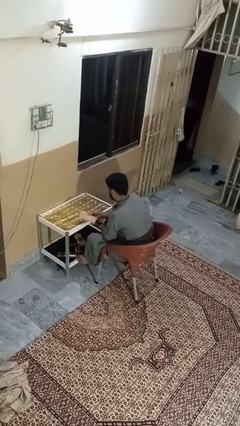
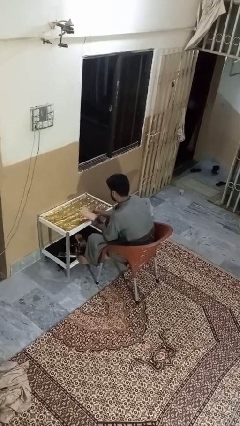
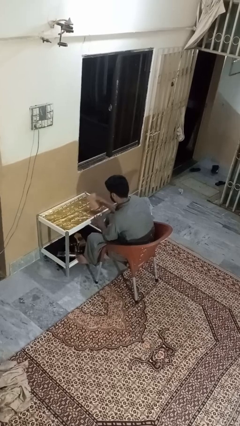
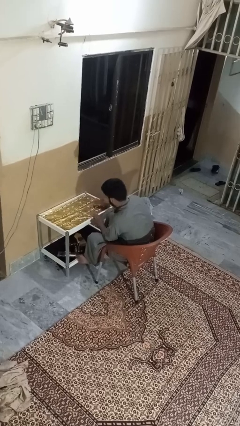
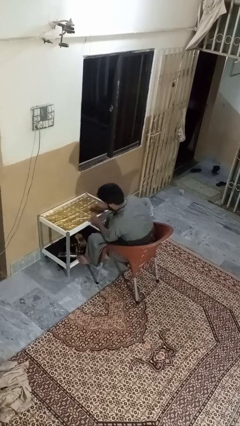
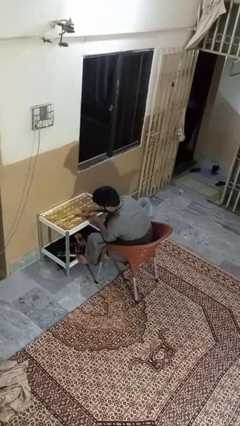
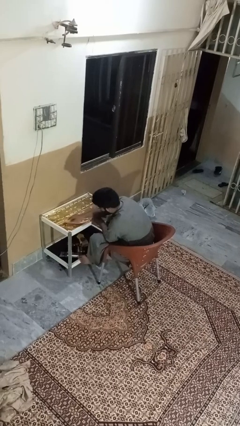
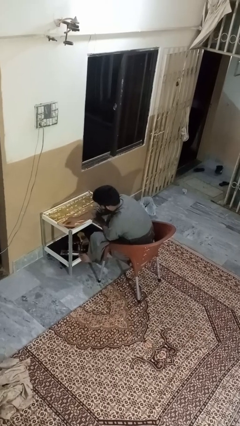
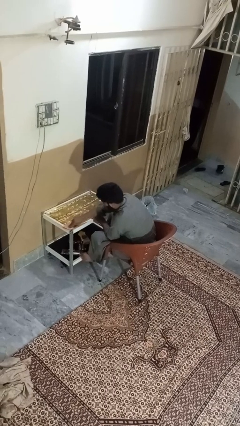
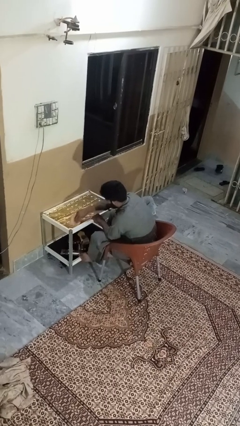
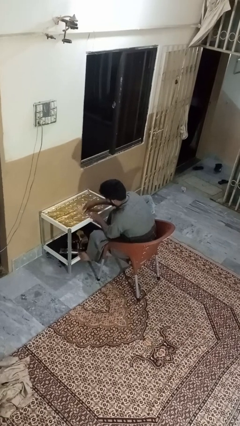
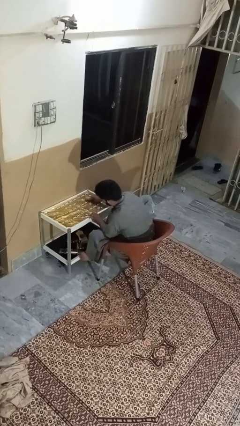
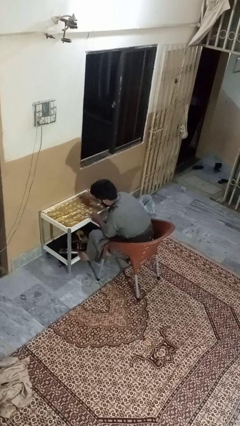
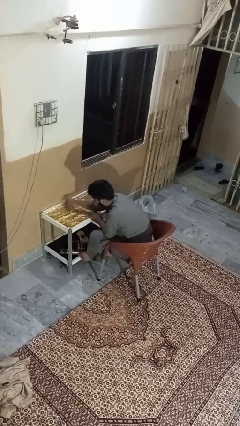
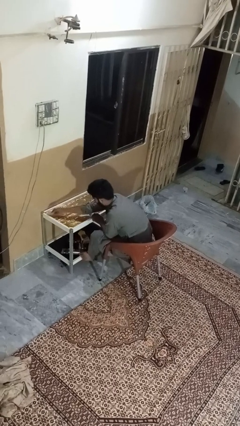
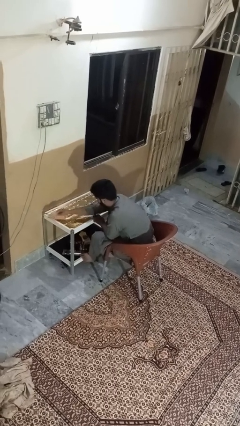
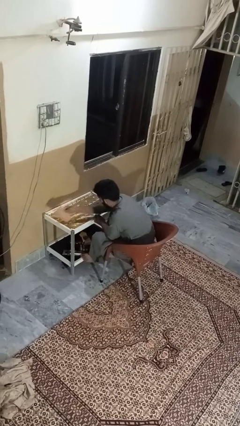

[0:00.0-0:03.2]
person cleans table with rag

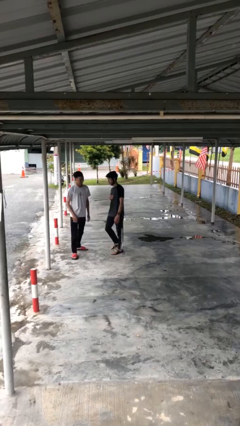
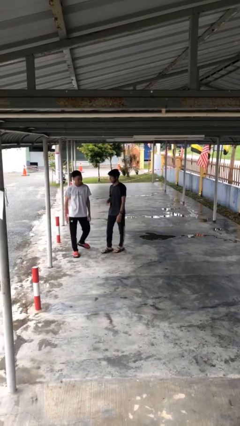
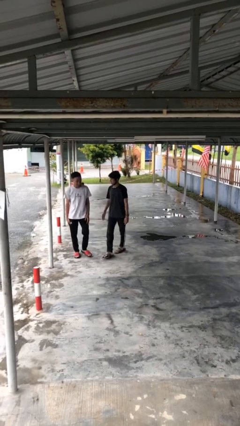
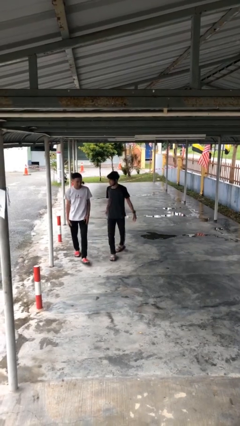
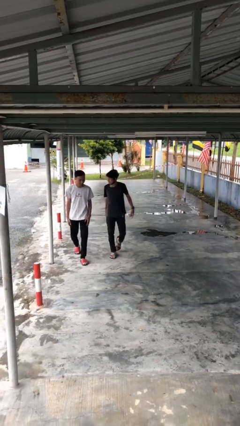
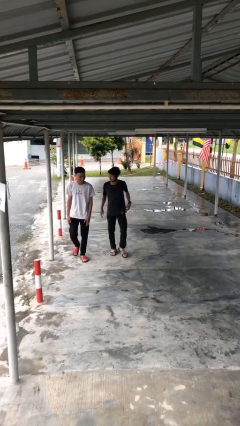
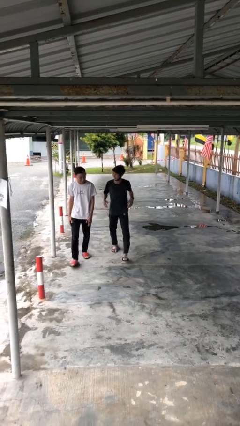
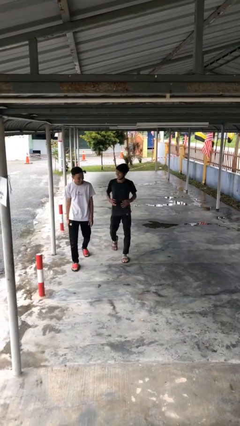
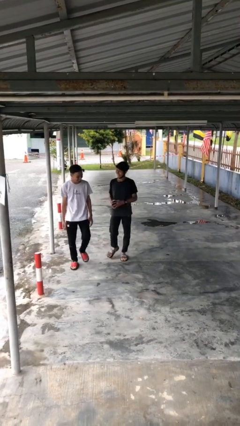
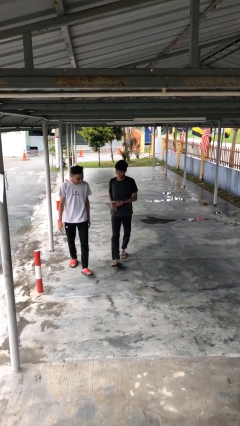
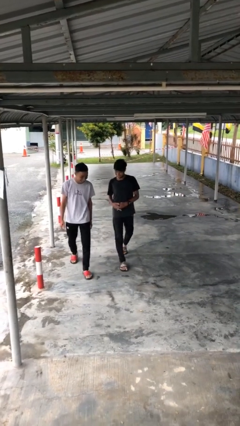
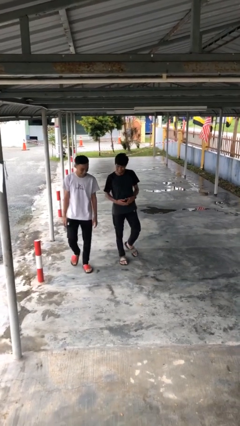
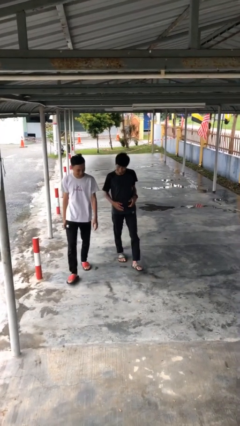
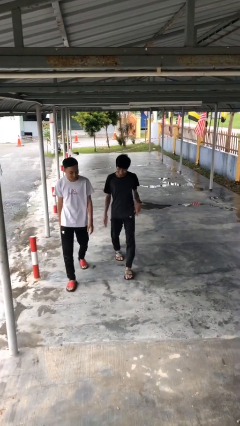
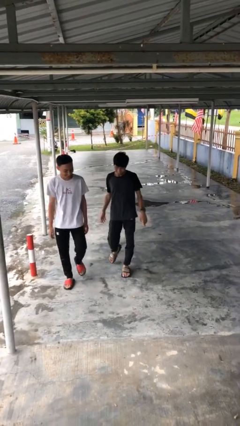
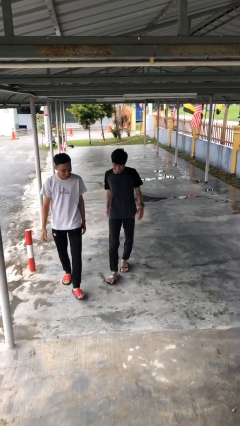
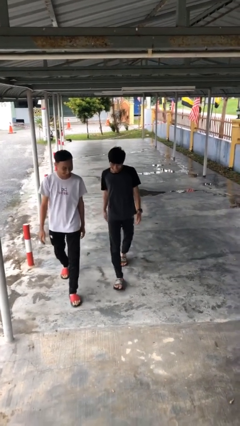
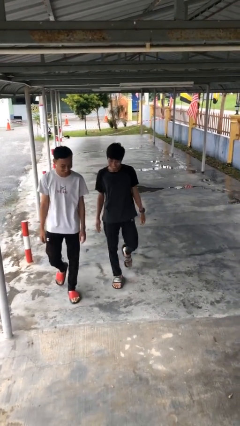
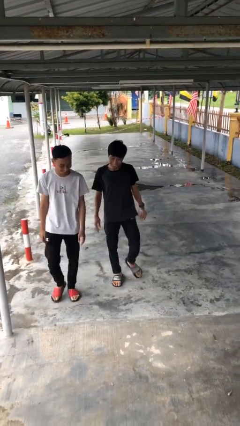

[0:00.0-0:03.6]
person talks to person

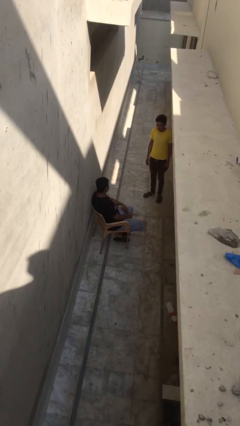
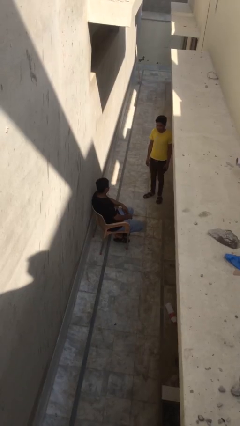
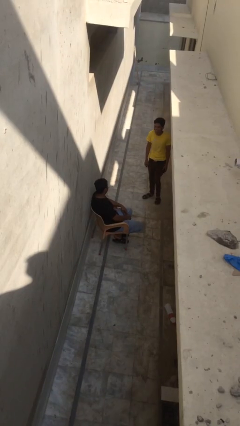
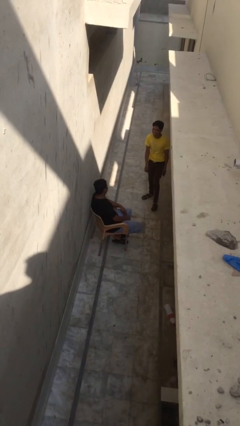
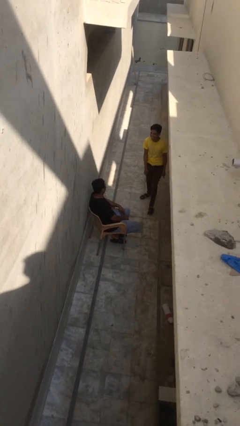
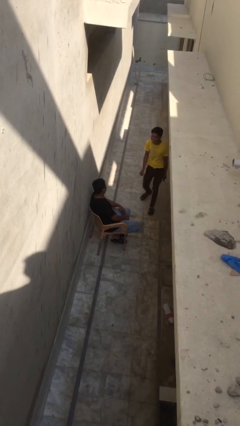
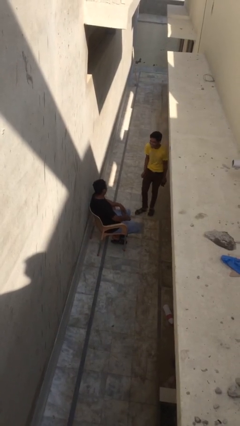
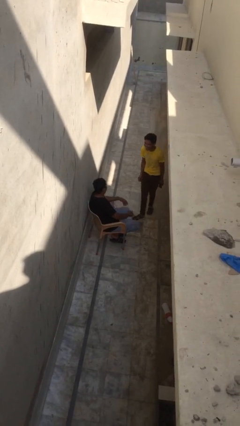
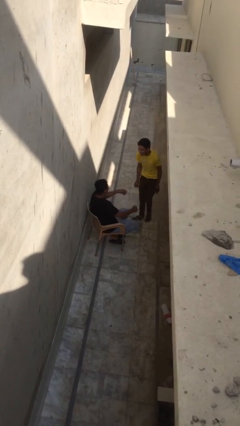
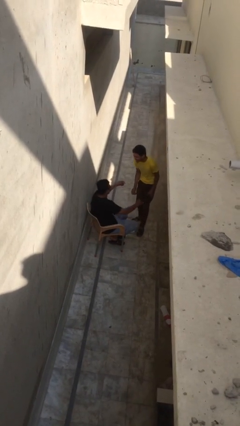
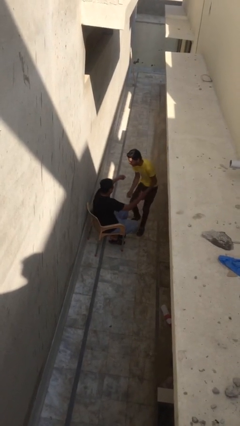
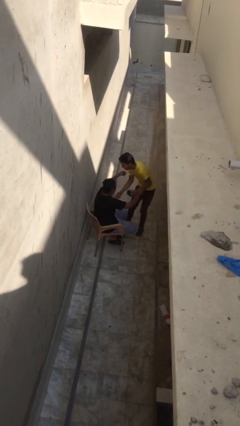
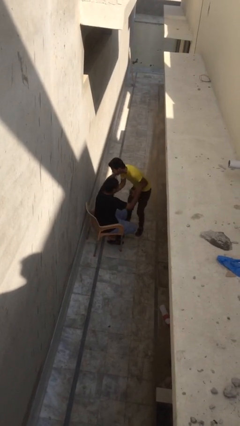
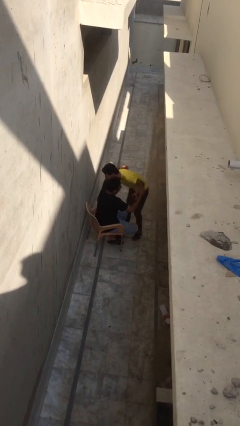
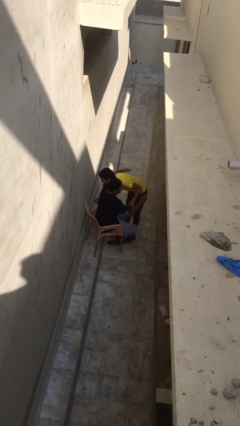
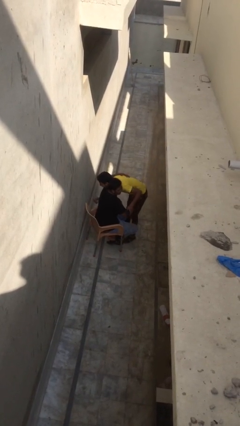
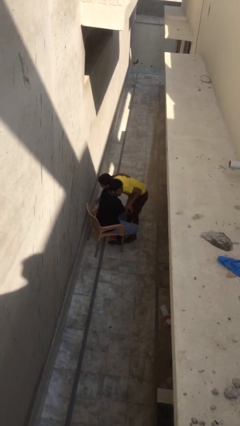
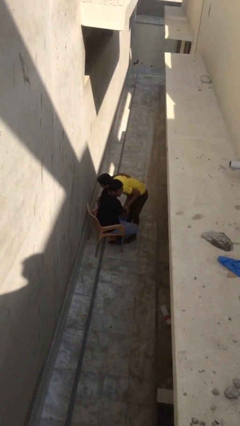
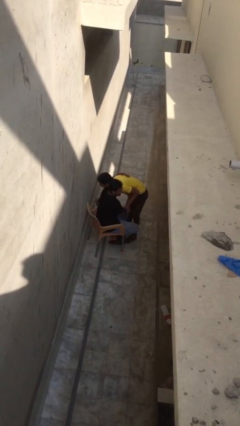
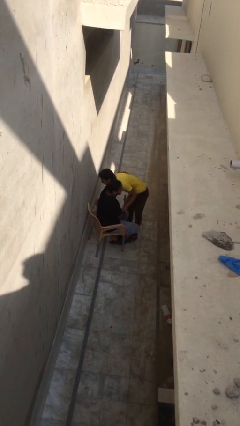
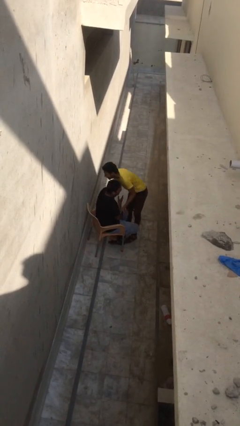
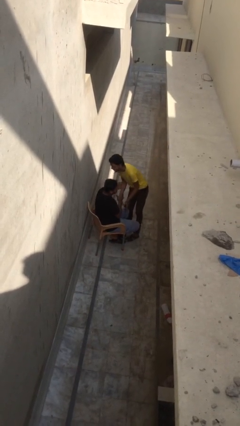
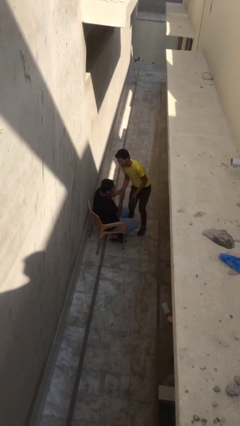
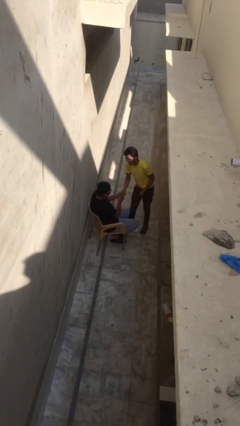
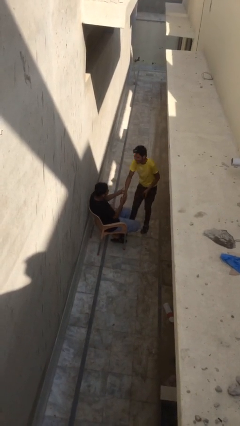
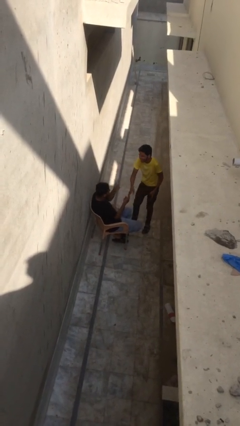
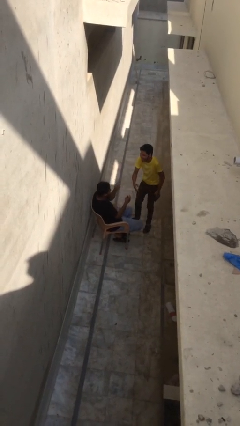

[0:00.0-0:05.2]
person embraces person

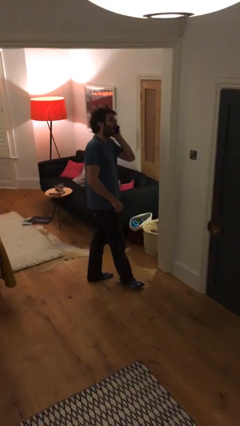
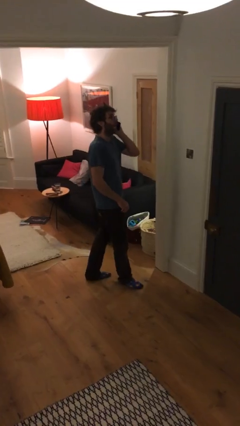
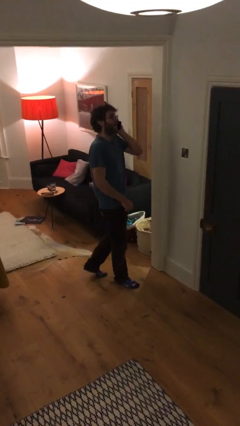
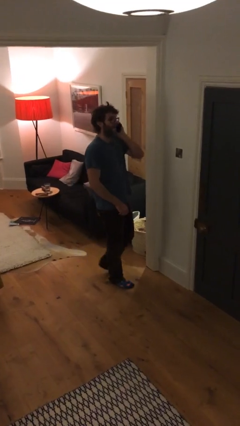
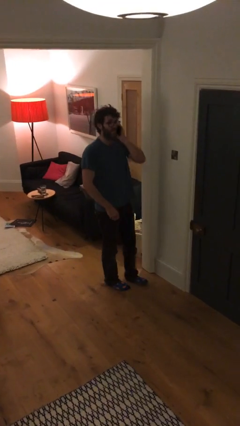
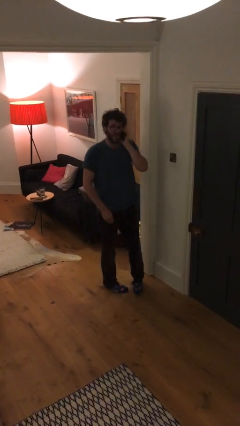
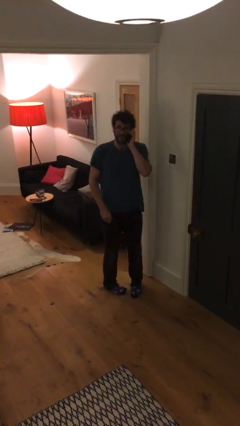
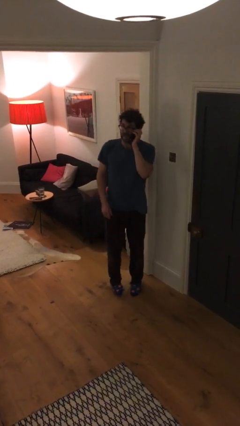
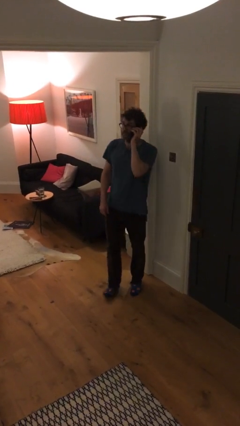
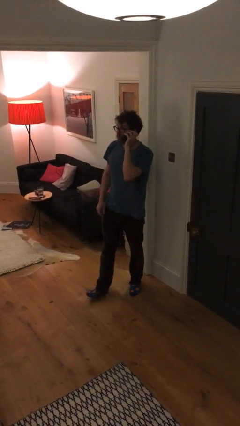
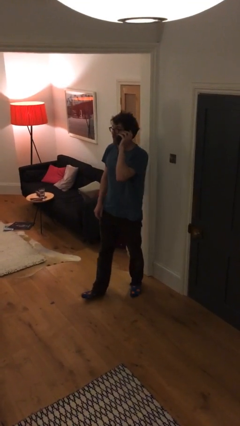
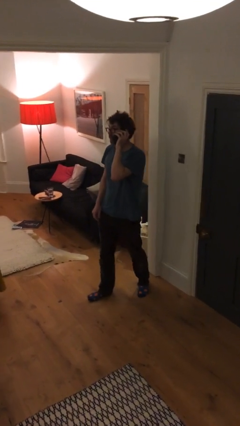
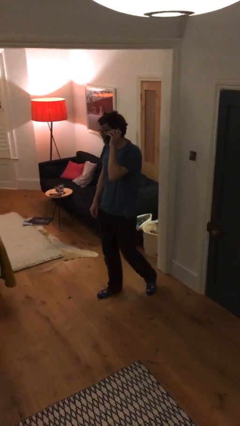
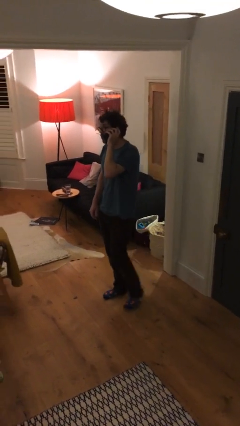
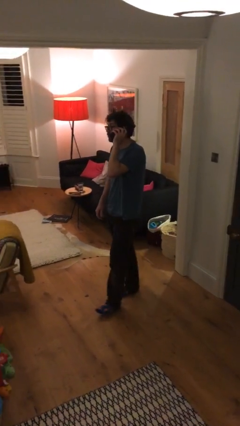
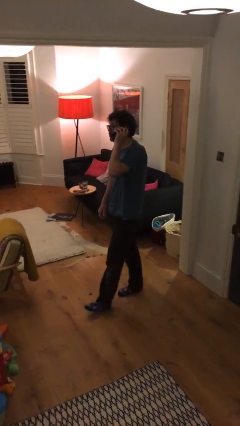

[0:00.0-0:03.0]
person talks on phone

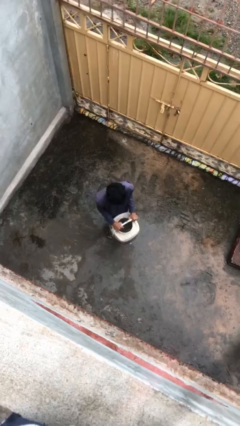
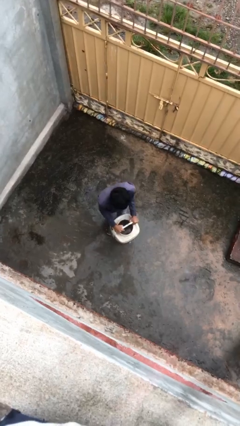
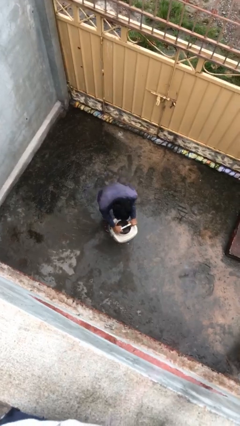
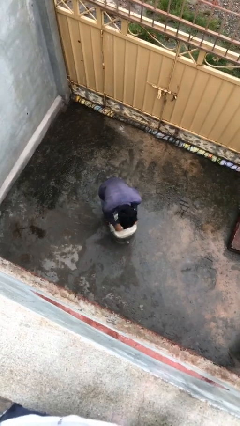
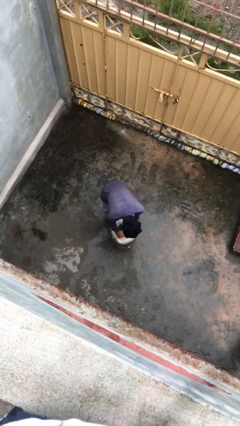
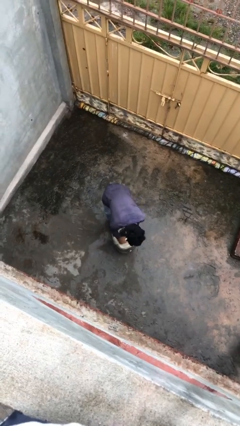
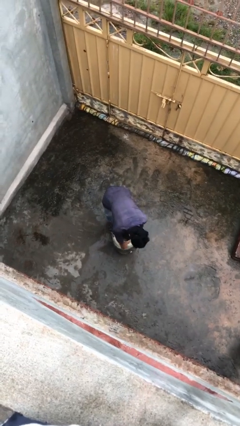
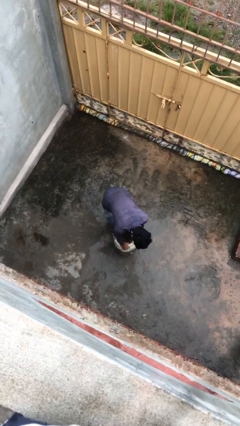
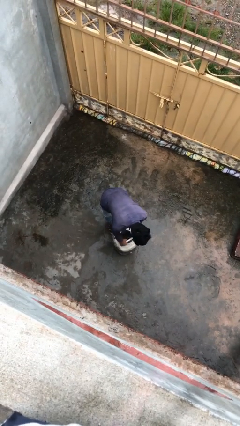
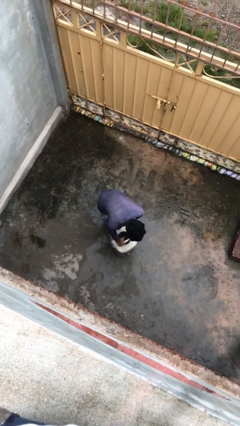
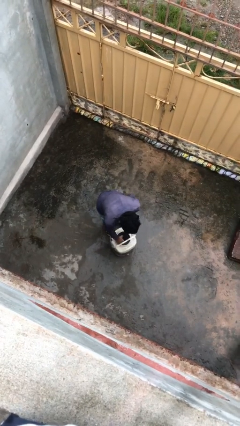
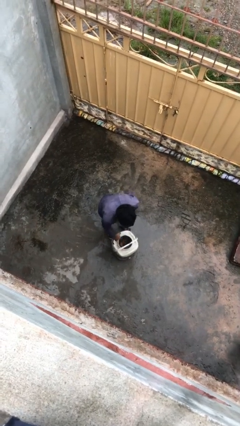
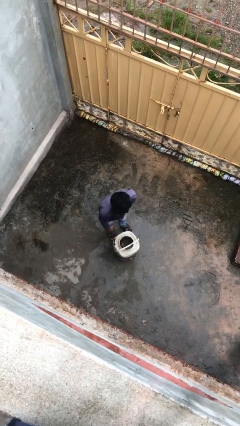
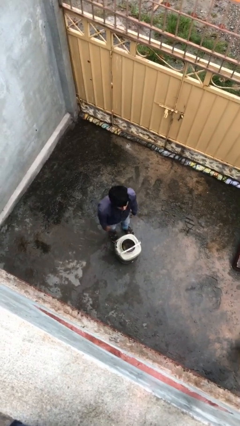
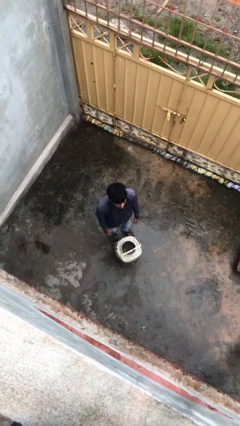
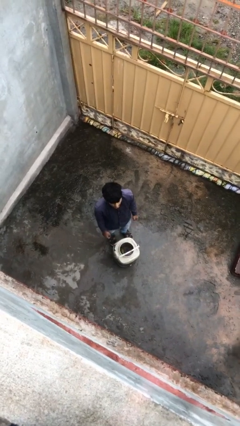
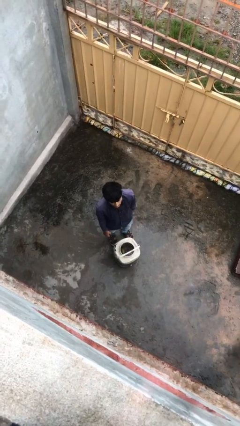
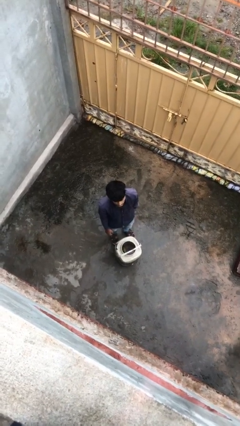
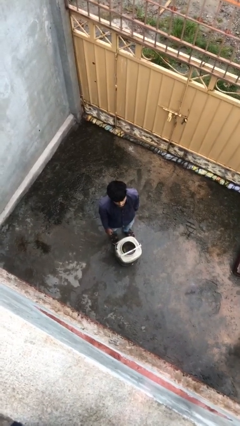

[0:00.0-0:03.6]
person puts down object on floor
